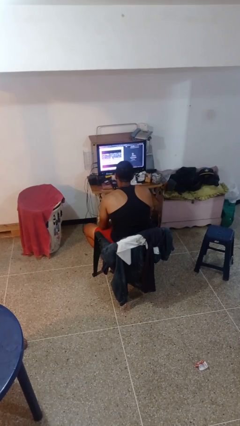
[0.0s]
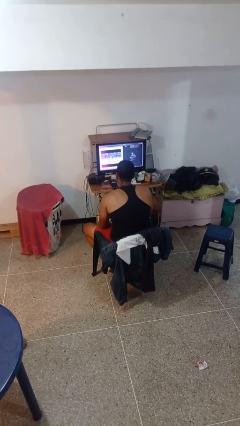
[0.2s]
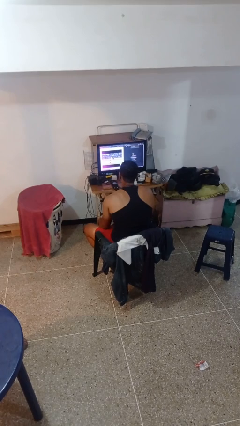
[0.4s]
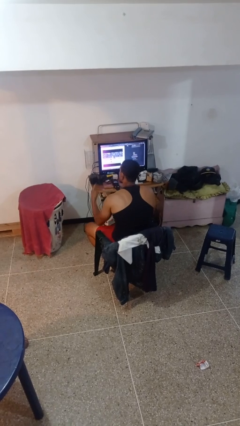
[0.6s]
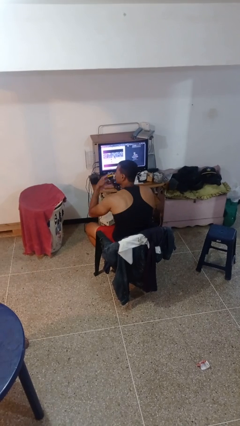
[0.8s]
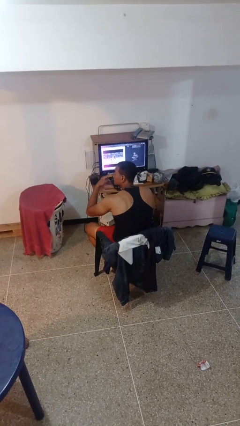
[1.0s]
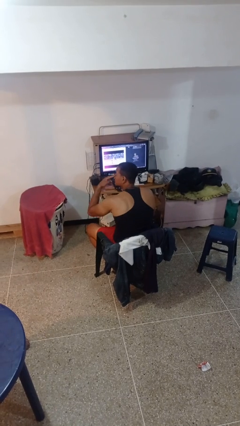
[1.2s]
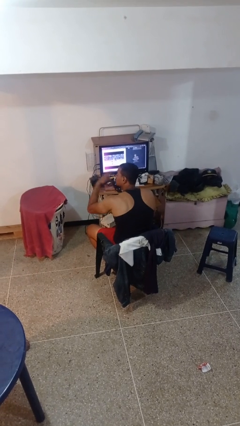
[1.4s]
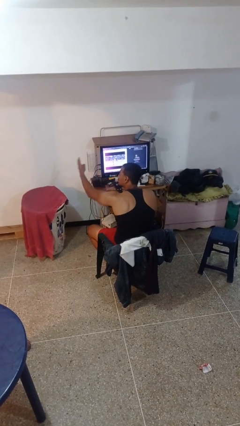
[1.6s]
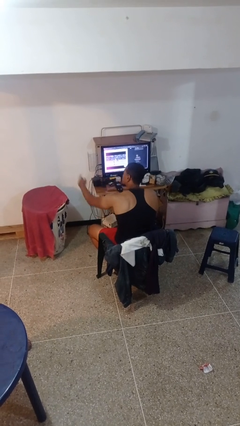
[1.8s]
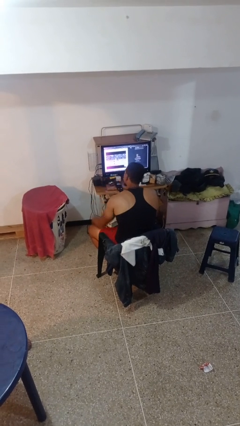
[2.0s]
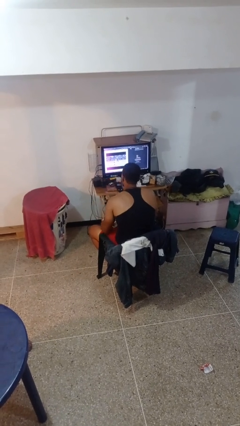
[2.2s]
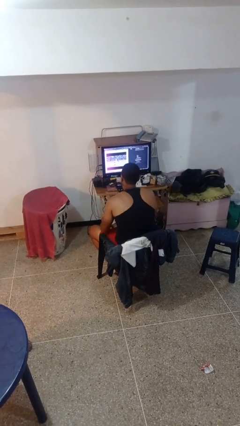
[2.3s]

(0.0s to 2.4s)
person gestures watch closely

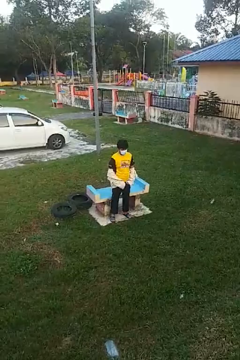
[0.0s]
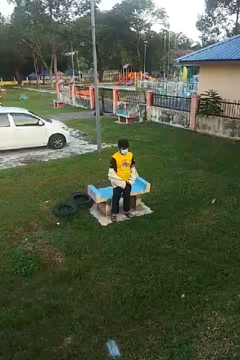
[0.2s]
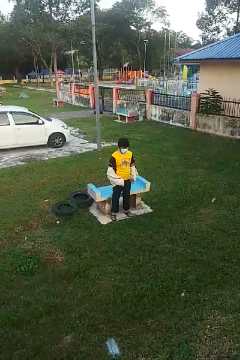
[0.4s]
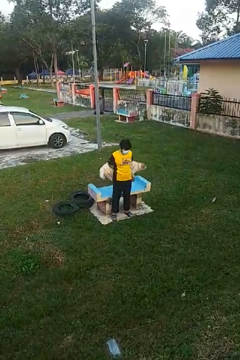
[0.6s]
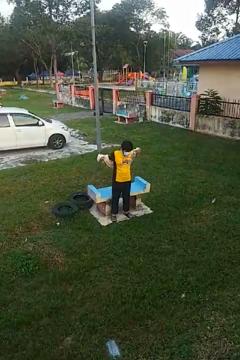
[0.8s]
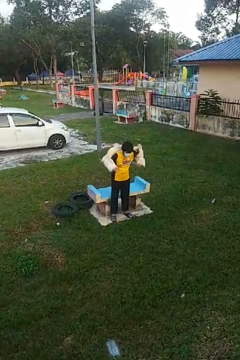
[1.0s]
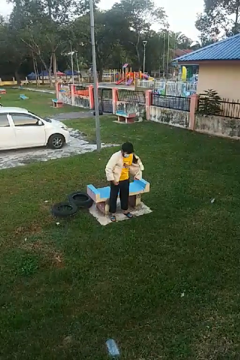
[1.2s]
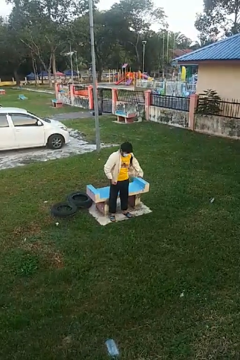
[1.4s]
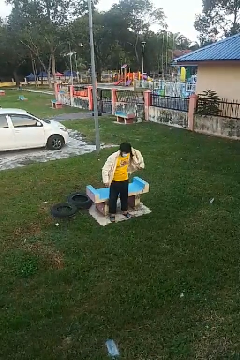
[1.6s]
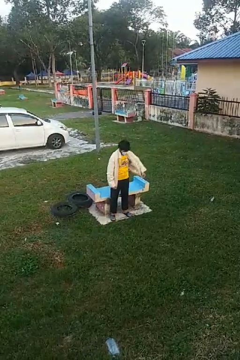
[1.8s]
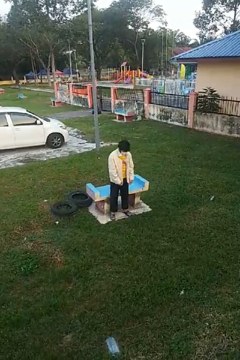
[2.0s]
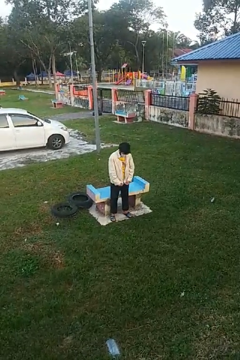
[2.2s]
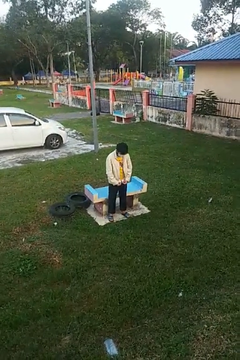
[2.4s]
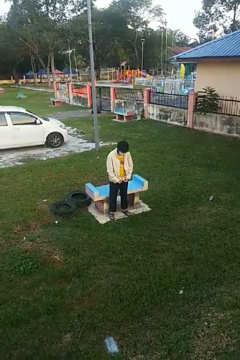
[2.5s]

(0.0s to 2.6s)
person puts on jacket

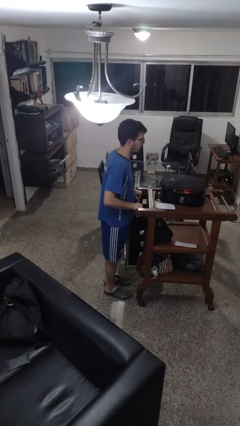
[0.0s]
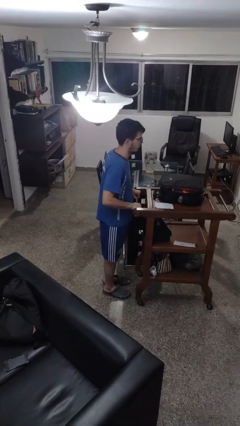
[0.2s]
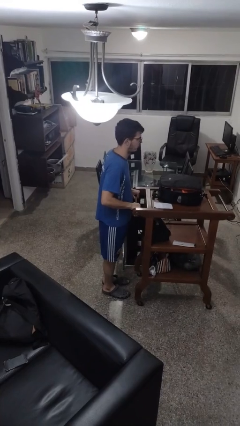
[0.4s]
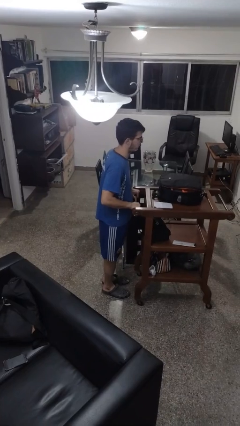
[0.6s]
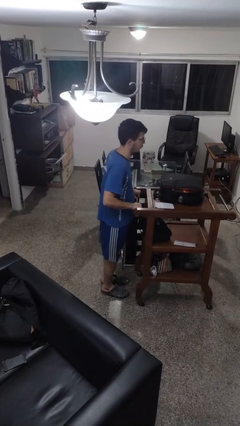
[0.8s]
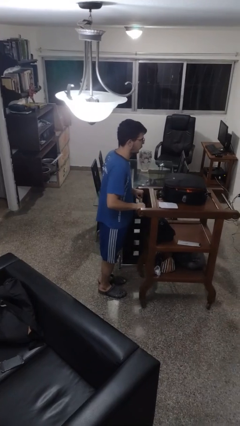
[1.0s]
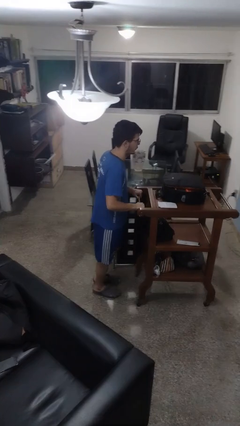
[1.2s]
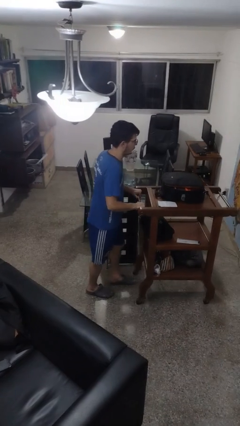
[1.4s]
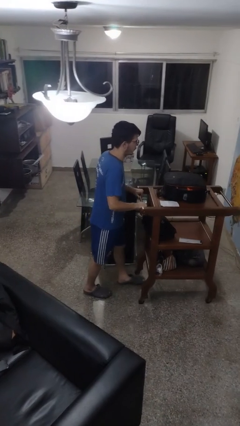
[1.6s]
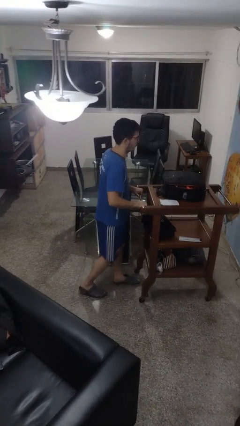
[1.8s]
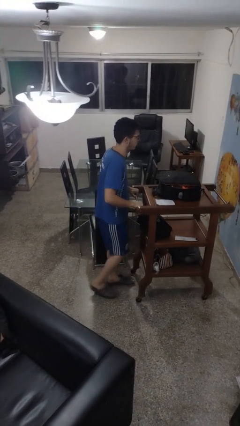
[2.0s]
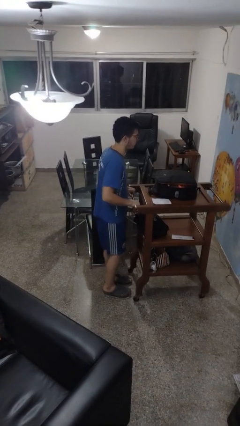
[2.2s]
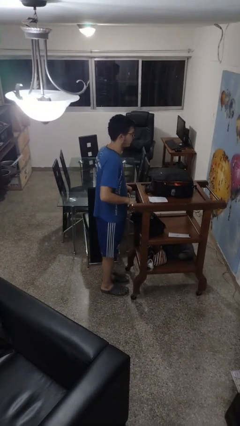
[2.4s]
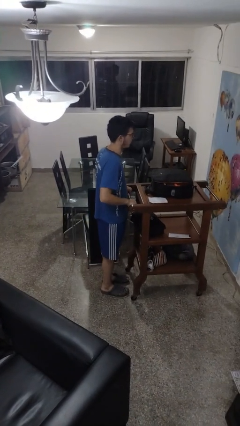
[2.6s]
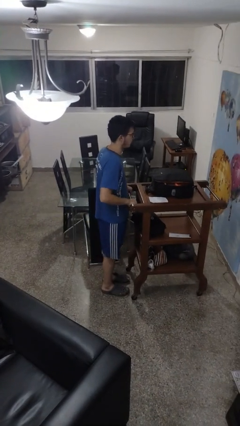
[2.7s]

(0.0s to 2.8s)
person pushes wheeled cart

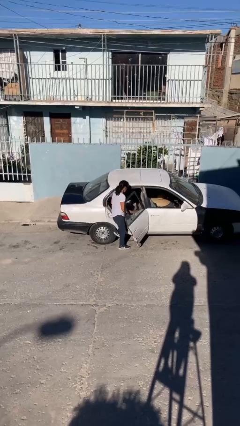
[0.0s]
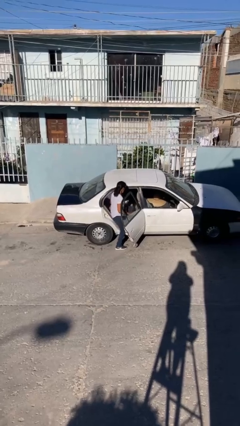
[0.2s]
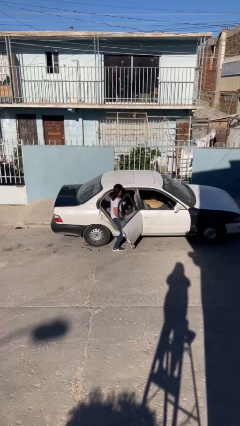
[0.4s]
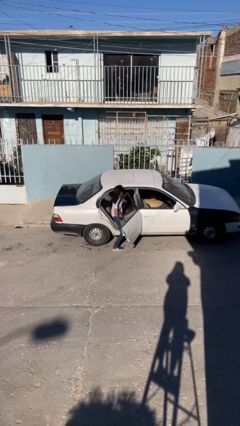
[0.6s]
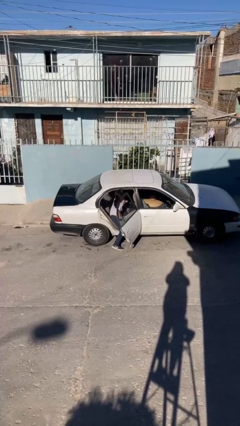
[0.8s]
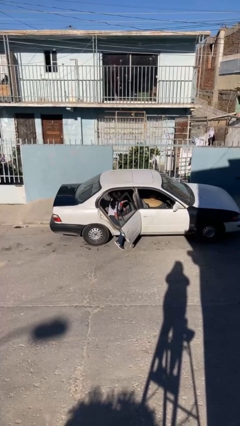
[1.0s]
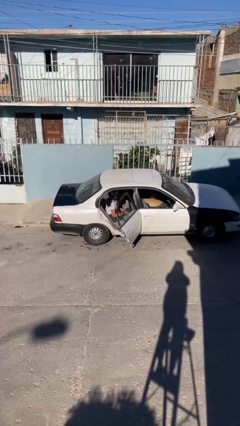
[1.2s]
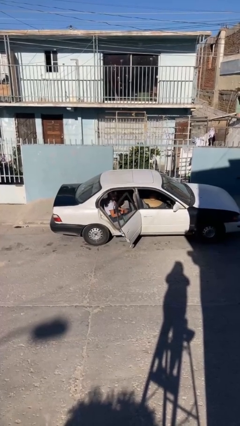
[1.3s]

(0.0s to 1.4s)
person enters car

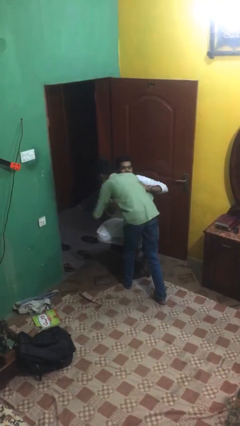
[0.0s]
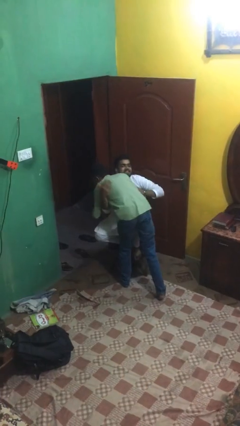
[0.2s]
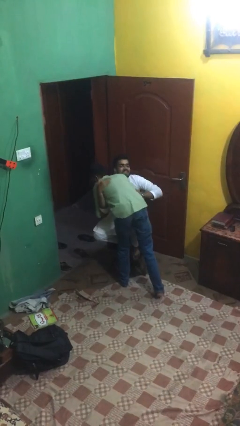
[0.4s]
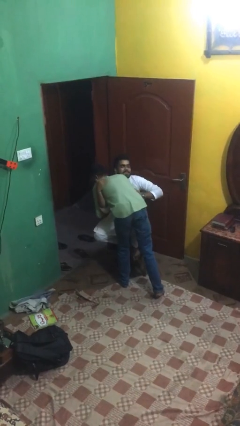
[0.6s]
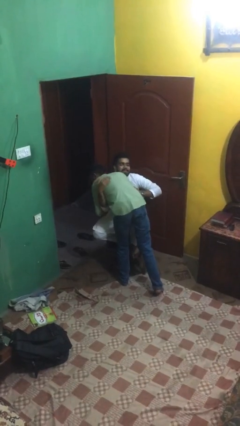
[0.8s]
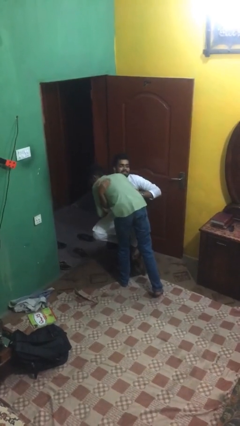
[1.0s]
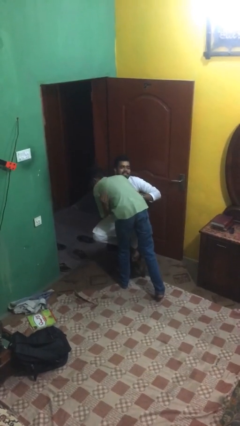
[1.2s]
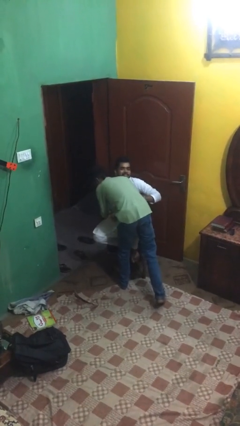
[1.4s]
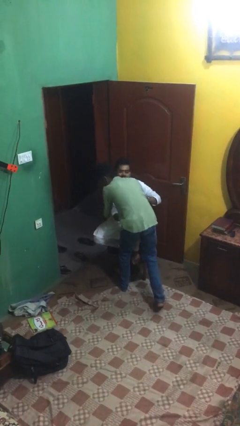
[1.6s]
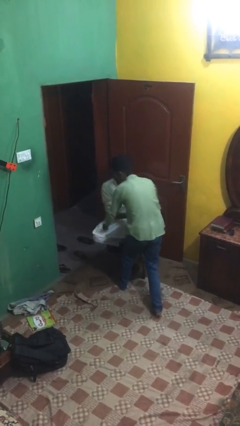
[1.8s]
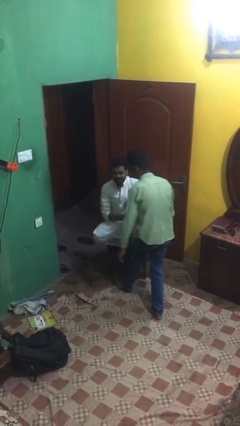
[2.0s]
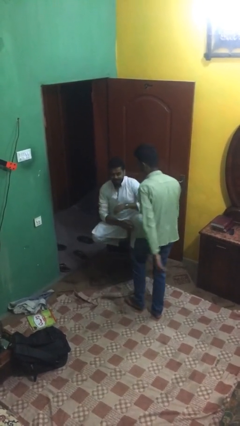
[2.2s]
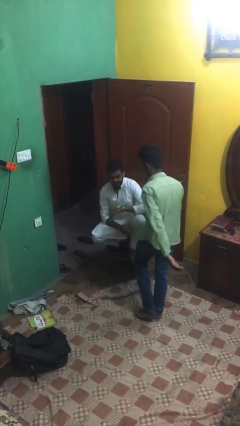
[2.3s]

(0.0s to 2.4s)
person embraces person

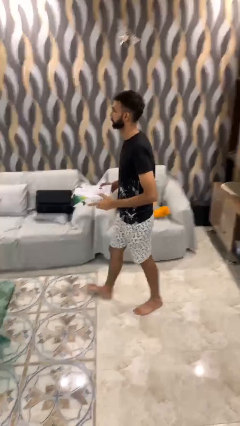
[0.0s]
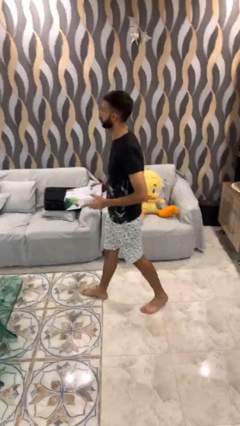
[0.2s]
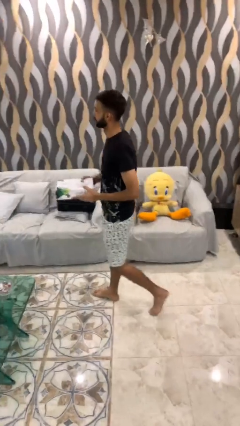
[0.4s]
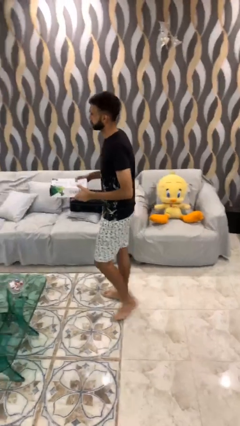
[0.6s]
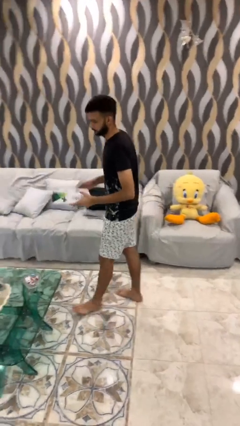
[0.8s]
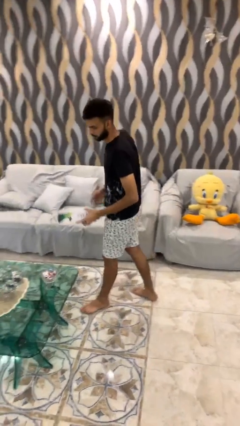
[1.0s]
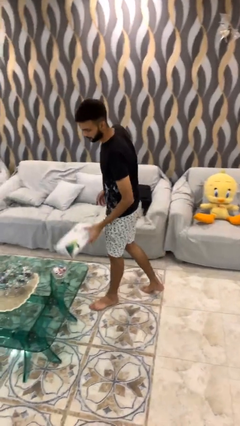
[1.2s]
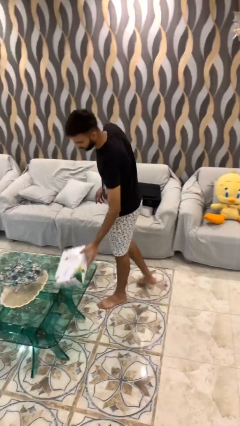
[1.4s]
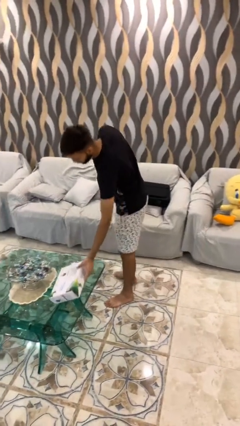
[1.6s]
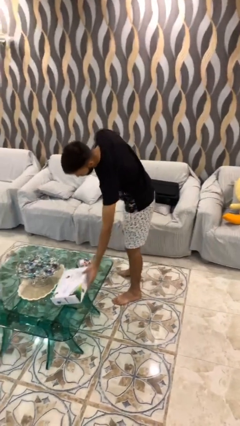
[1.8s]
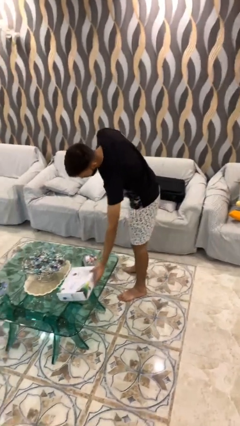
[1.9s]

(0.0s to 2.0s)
person puts down object on table

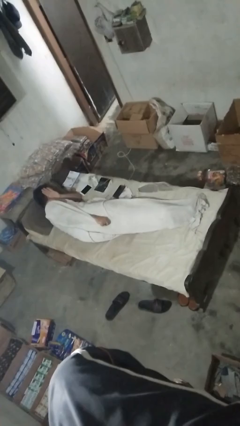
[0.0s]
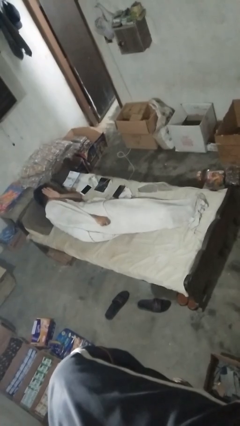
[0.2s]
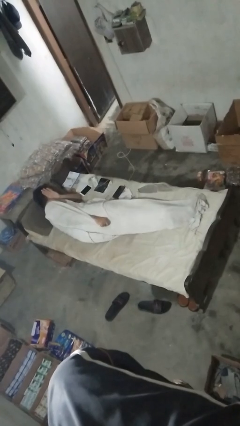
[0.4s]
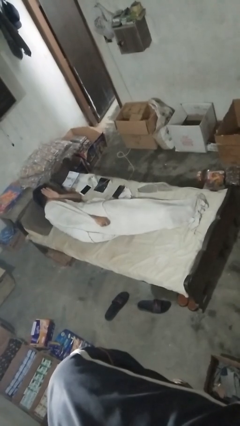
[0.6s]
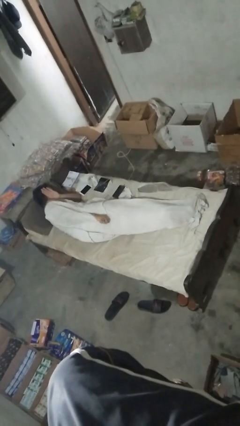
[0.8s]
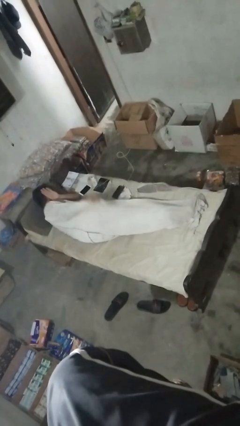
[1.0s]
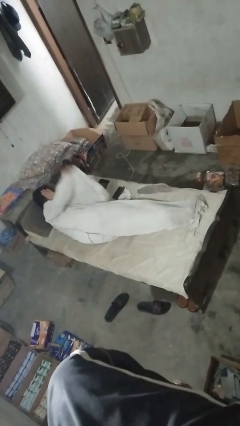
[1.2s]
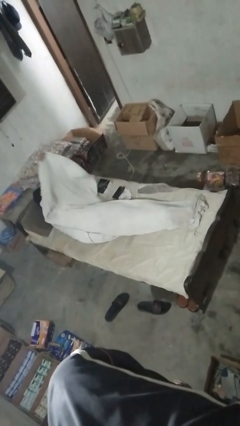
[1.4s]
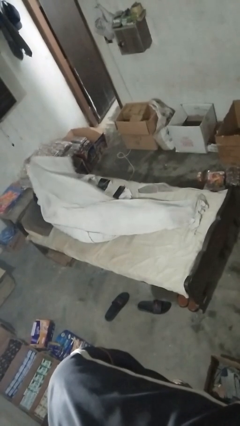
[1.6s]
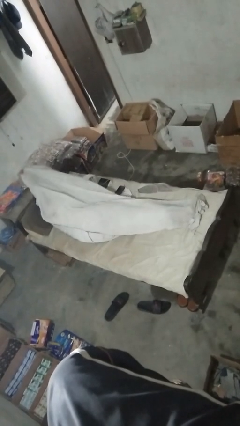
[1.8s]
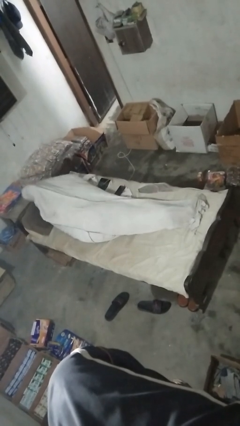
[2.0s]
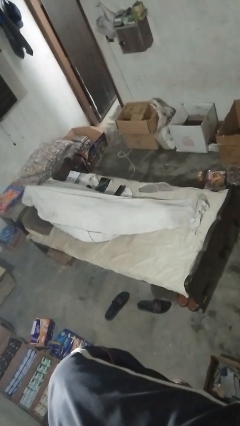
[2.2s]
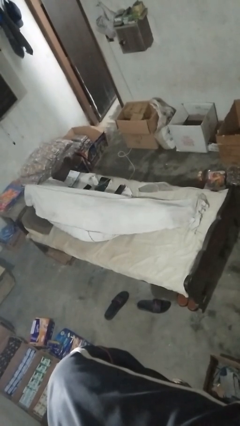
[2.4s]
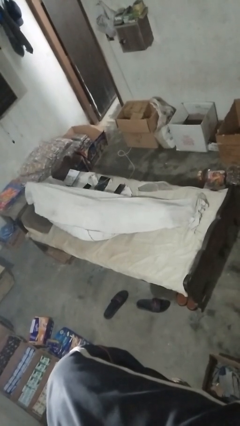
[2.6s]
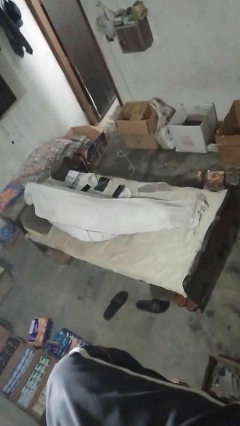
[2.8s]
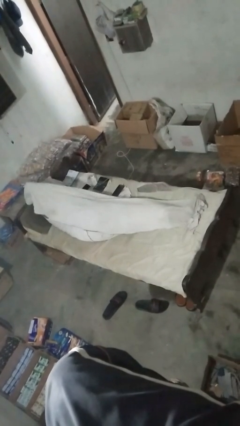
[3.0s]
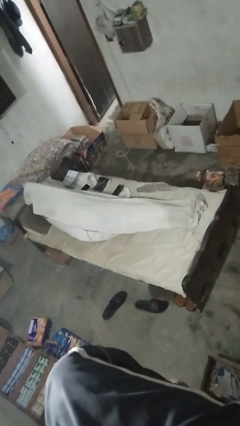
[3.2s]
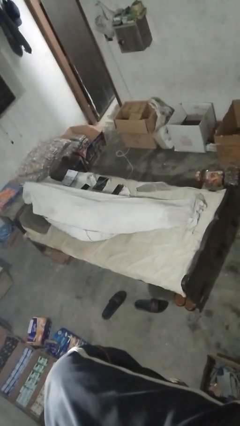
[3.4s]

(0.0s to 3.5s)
person covers with bedsheets

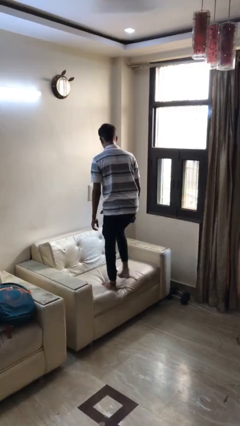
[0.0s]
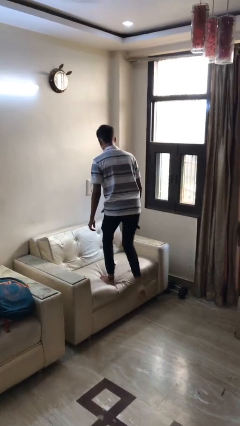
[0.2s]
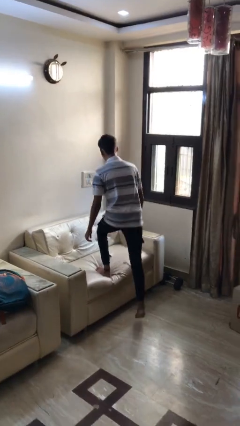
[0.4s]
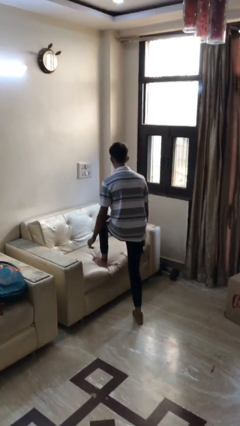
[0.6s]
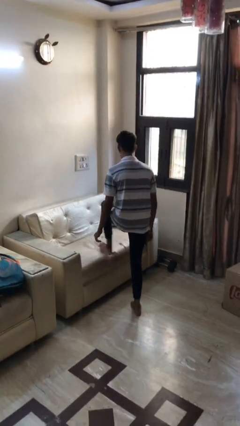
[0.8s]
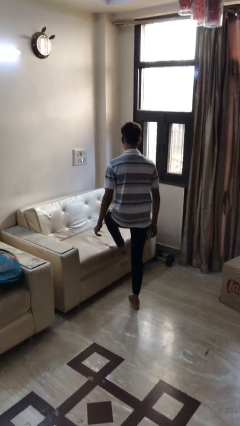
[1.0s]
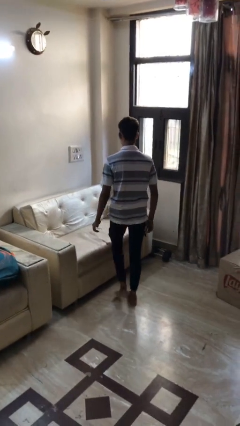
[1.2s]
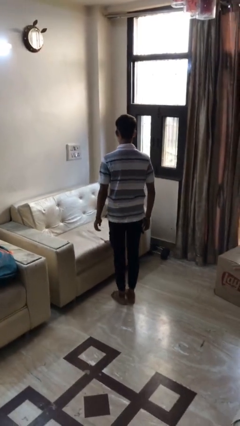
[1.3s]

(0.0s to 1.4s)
person climbs off couch
